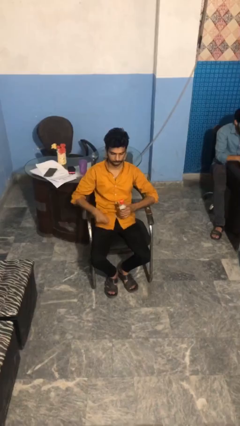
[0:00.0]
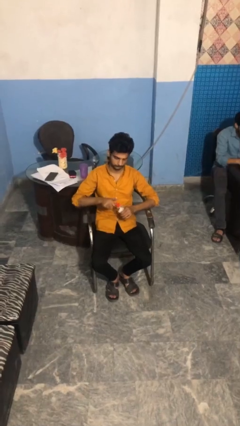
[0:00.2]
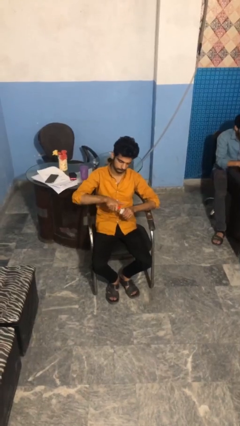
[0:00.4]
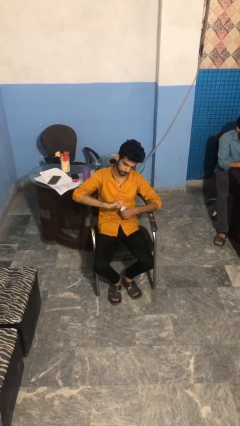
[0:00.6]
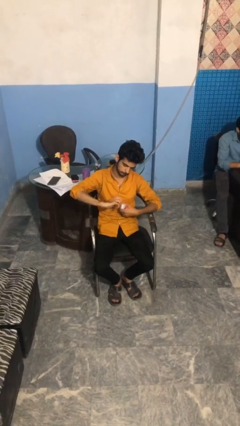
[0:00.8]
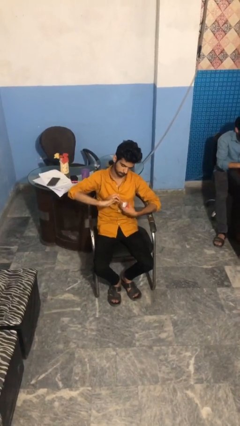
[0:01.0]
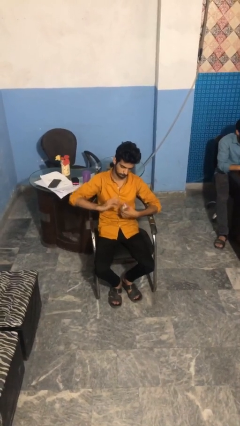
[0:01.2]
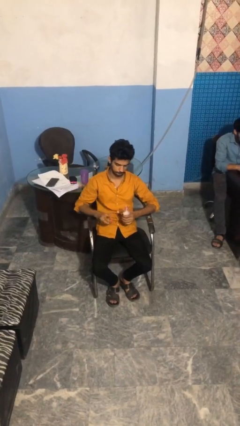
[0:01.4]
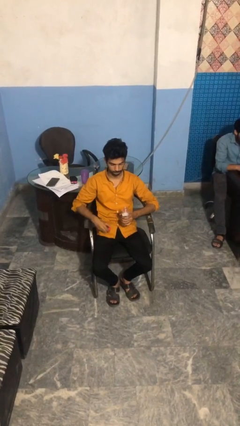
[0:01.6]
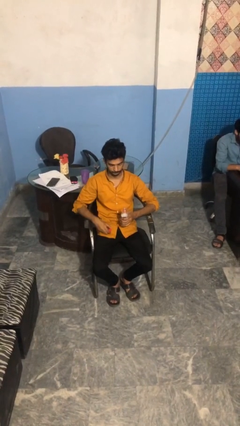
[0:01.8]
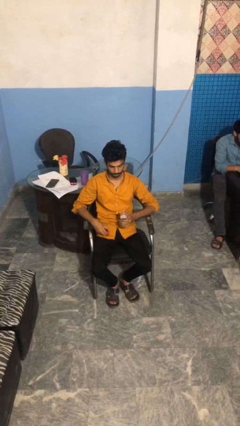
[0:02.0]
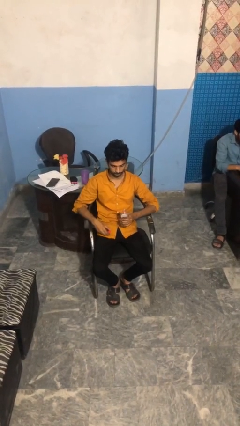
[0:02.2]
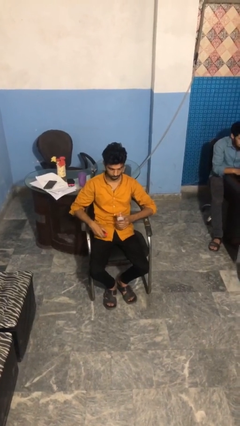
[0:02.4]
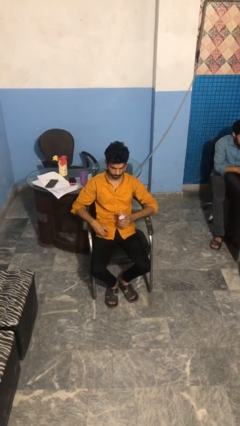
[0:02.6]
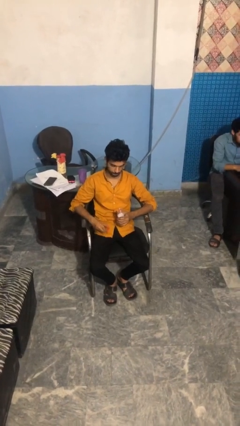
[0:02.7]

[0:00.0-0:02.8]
person unscrews lid from bottle

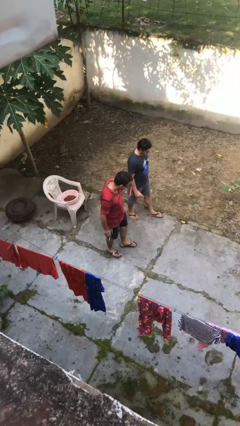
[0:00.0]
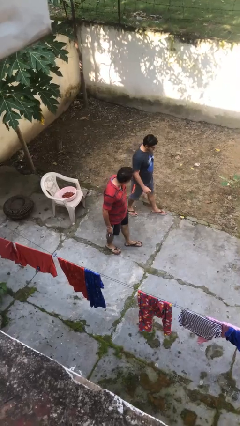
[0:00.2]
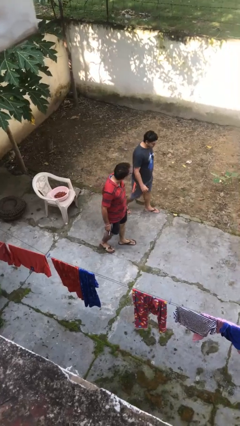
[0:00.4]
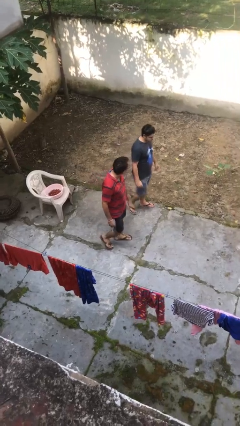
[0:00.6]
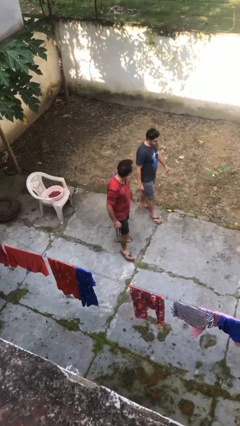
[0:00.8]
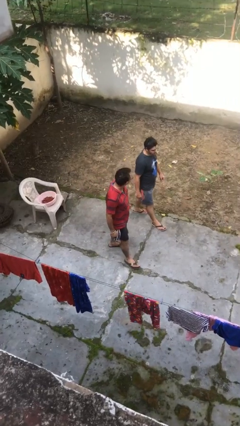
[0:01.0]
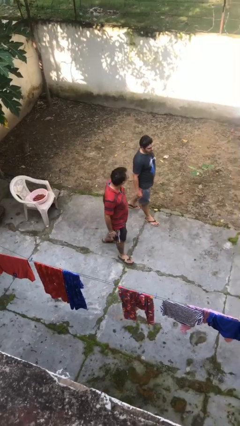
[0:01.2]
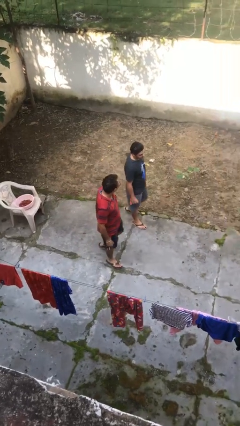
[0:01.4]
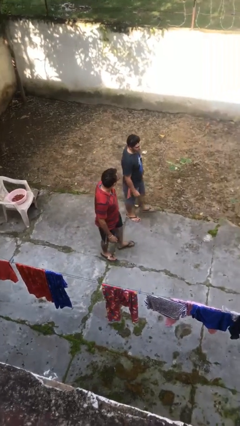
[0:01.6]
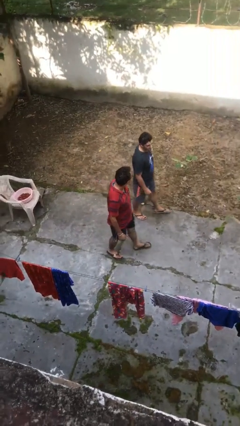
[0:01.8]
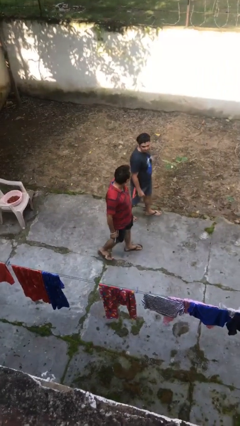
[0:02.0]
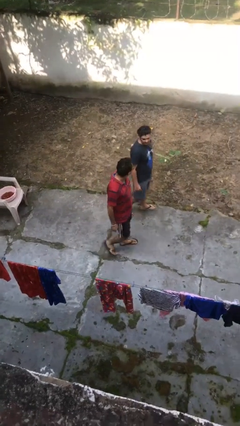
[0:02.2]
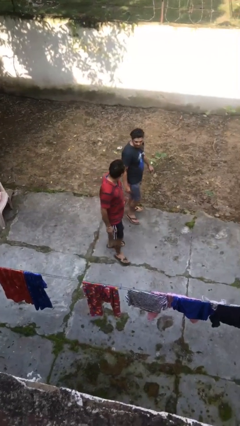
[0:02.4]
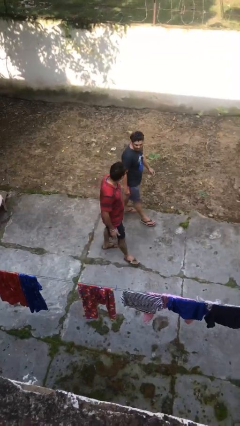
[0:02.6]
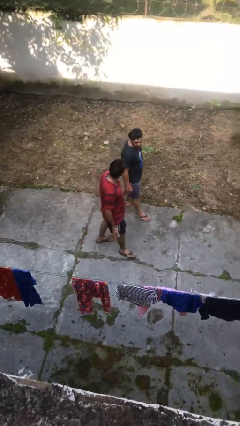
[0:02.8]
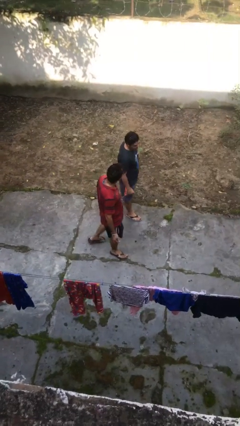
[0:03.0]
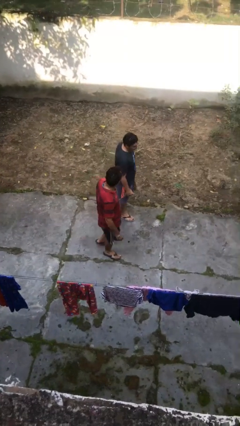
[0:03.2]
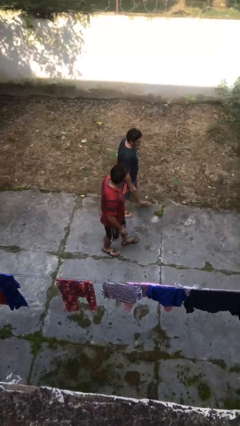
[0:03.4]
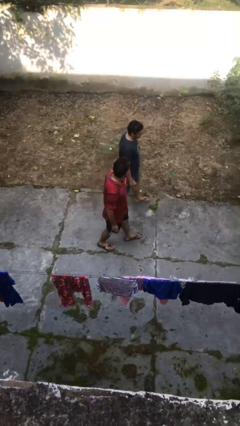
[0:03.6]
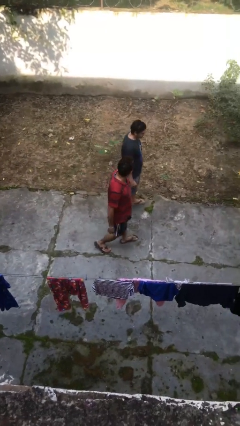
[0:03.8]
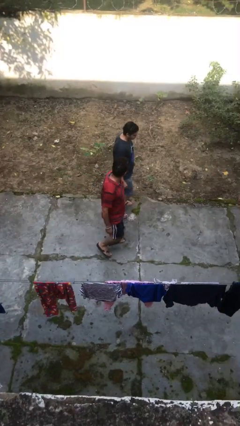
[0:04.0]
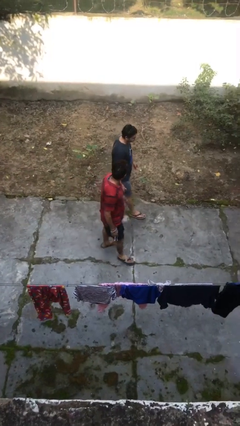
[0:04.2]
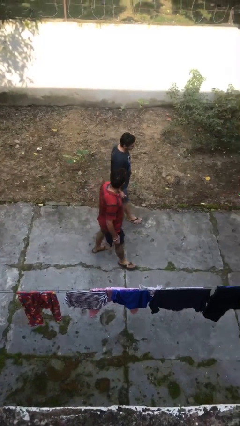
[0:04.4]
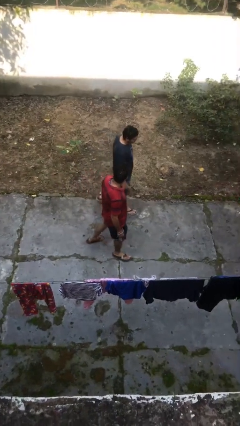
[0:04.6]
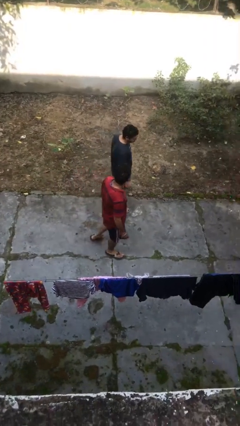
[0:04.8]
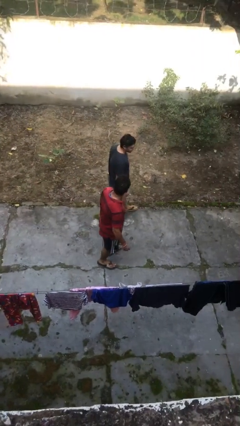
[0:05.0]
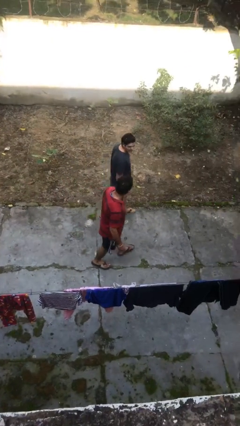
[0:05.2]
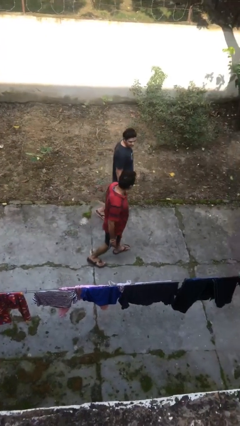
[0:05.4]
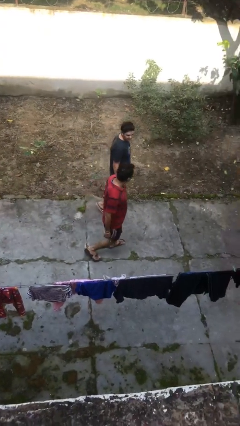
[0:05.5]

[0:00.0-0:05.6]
person talks to person

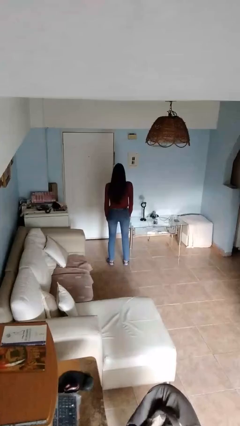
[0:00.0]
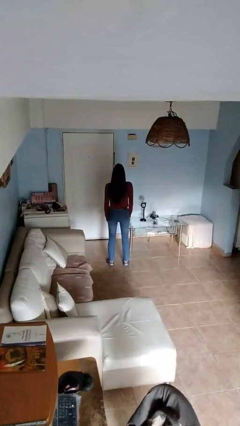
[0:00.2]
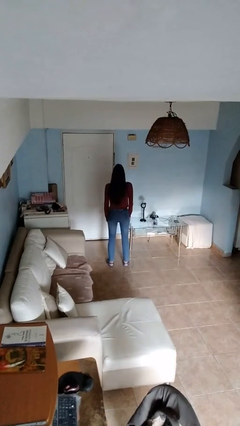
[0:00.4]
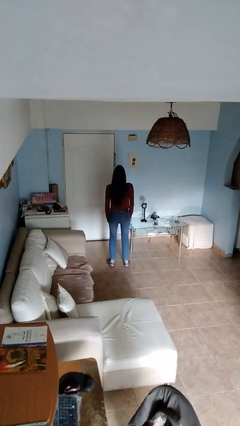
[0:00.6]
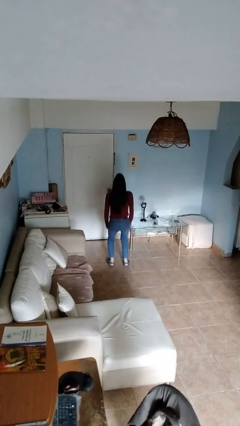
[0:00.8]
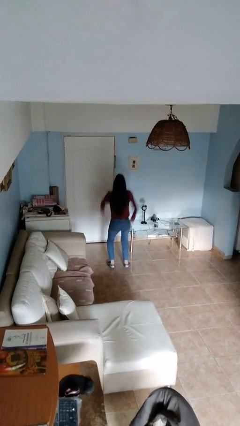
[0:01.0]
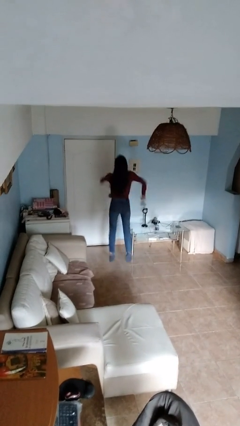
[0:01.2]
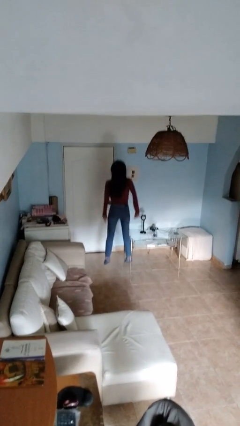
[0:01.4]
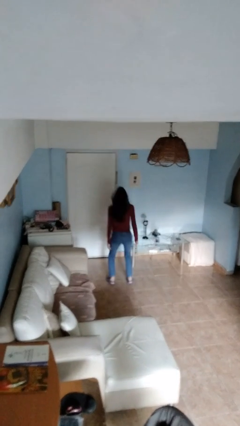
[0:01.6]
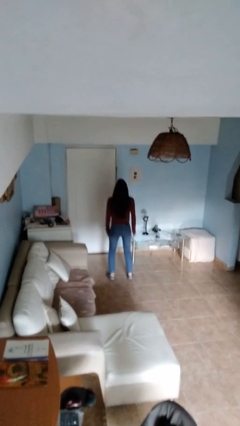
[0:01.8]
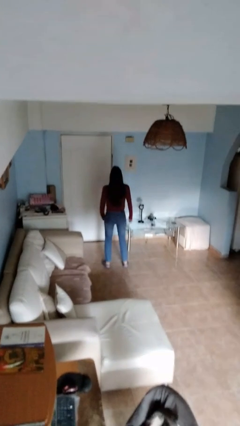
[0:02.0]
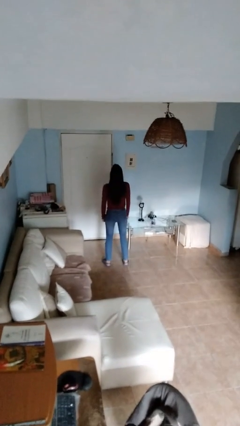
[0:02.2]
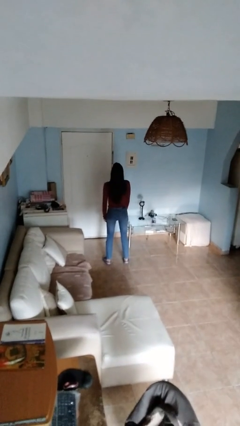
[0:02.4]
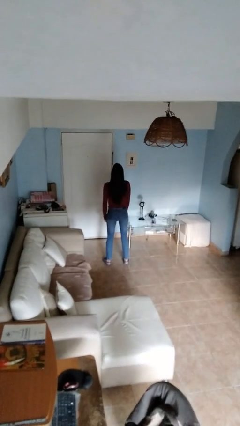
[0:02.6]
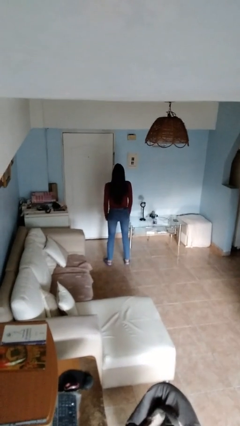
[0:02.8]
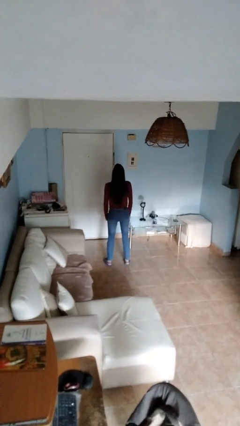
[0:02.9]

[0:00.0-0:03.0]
person jumps

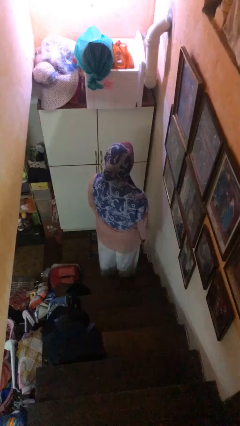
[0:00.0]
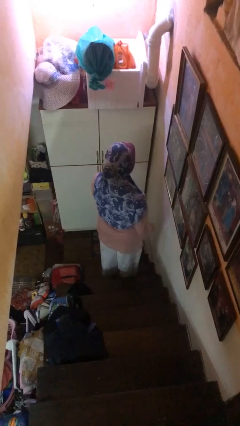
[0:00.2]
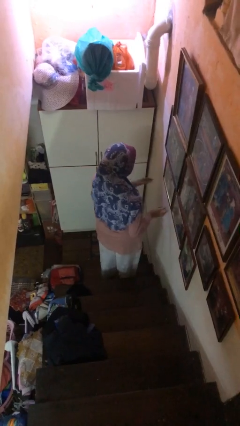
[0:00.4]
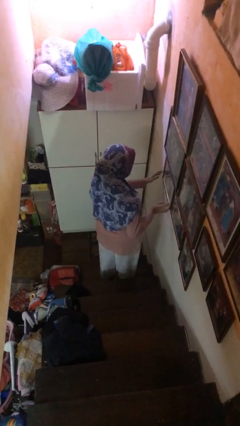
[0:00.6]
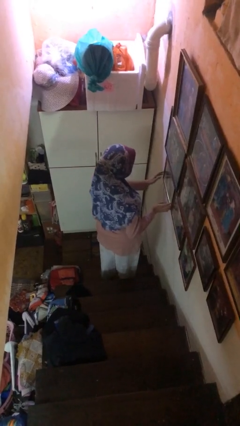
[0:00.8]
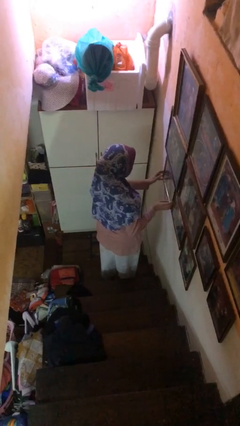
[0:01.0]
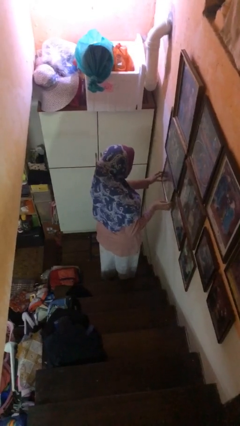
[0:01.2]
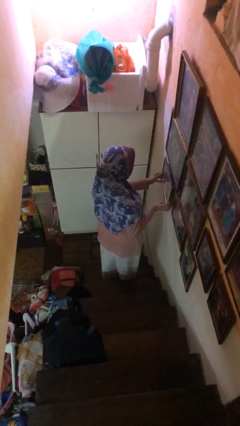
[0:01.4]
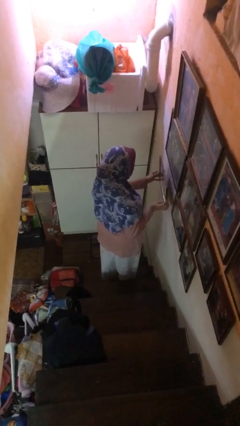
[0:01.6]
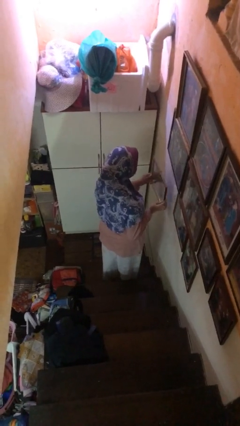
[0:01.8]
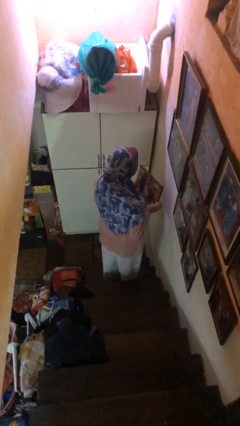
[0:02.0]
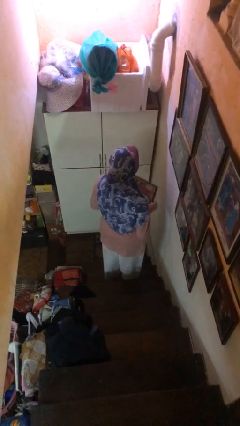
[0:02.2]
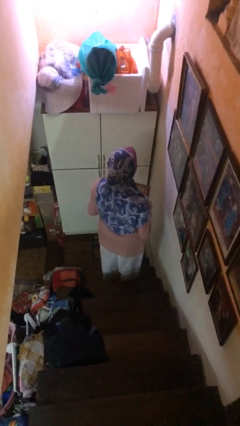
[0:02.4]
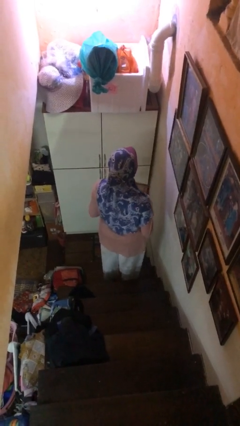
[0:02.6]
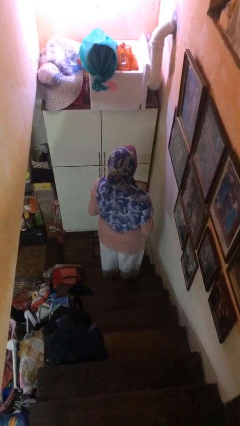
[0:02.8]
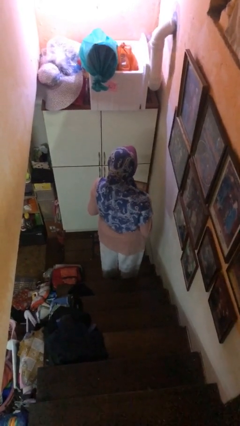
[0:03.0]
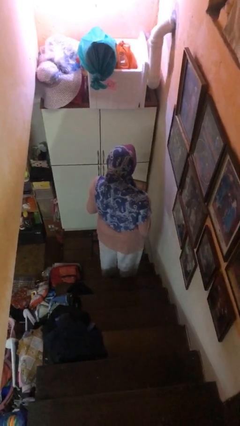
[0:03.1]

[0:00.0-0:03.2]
person puts up picture frame

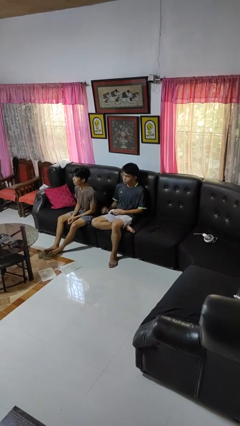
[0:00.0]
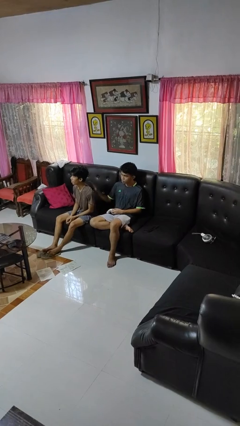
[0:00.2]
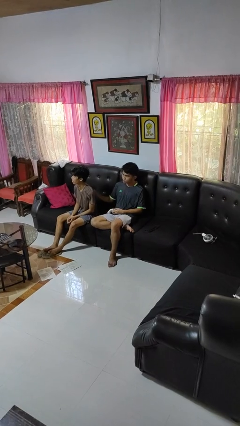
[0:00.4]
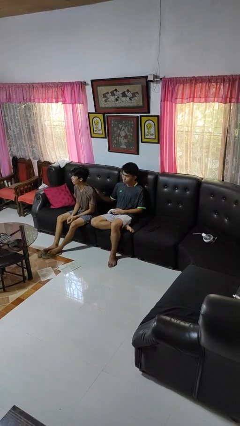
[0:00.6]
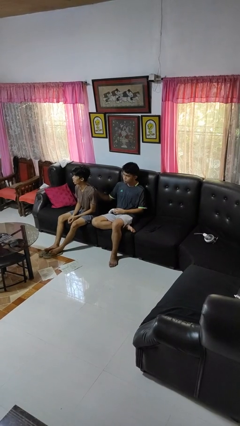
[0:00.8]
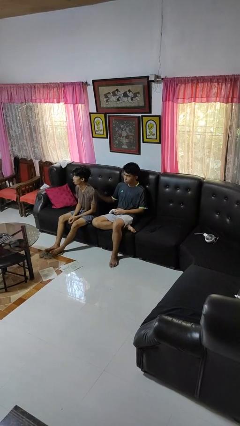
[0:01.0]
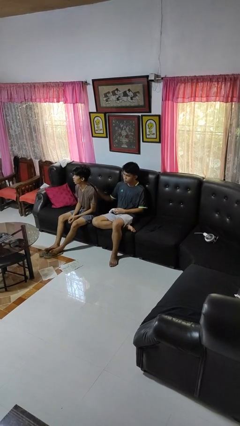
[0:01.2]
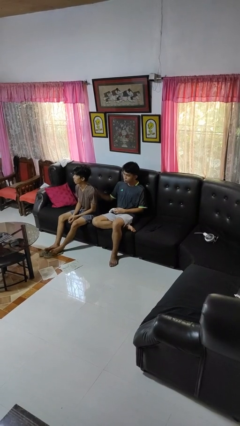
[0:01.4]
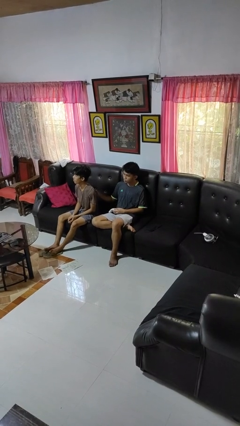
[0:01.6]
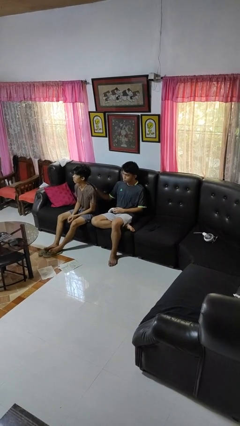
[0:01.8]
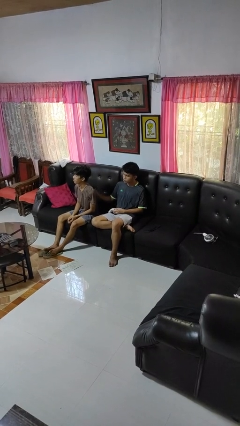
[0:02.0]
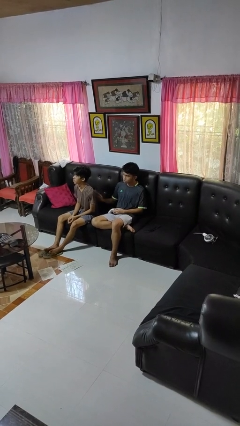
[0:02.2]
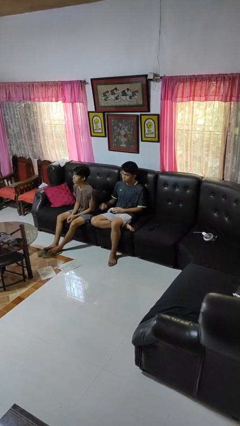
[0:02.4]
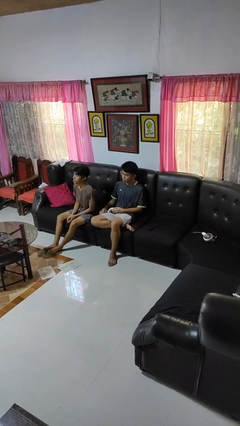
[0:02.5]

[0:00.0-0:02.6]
person touches back of person

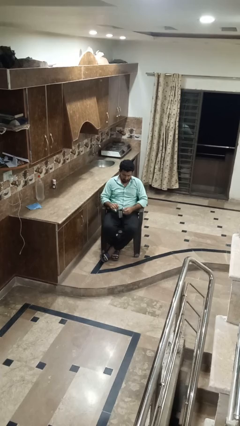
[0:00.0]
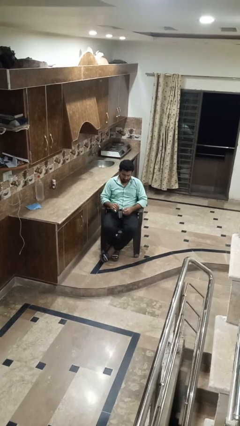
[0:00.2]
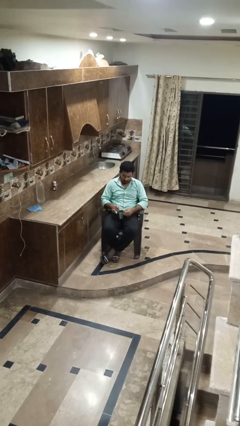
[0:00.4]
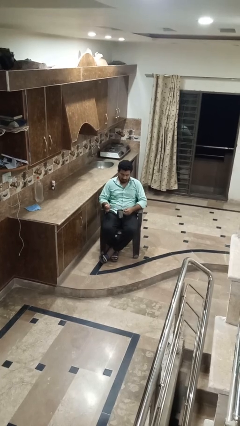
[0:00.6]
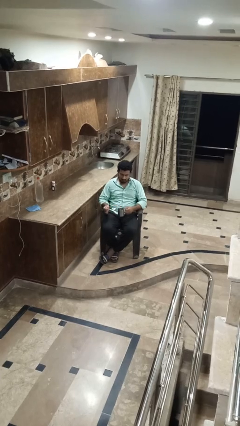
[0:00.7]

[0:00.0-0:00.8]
person stirs mug
